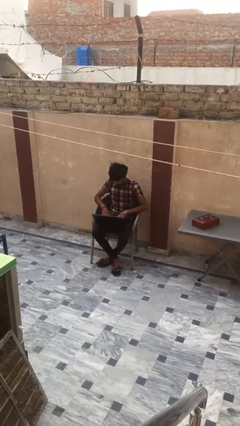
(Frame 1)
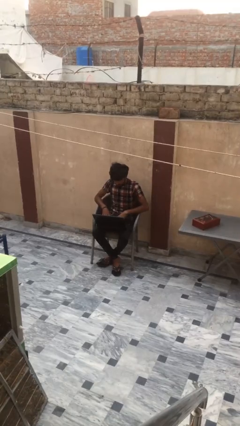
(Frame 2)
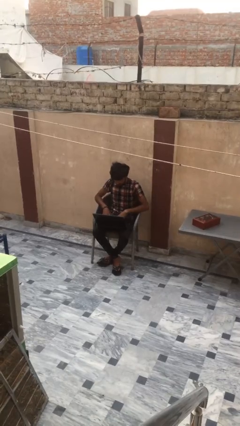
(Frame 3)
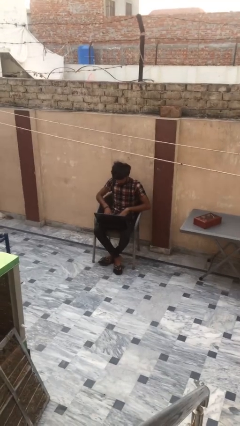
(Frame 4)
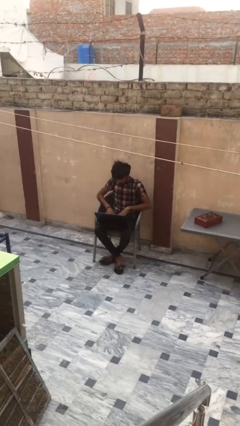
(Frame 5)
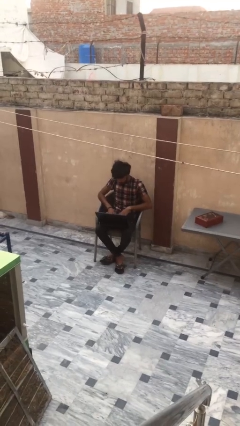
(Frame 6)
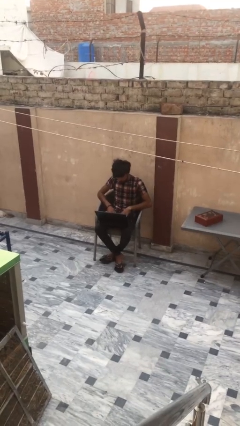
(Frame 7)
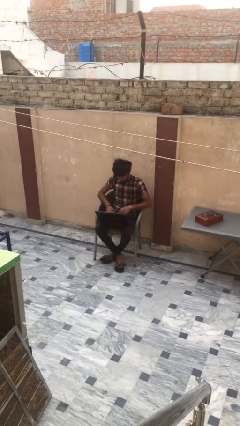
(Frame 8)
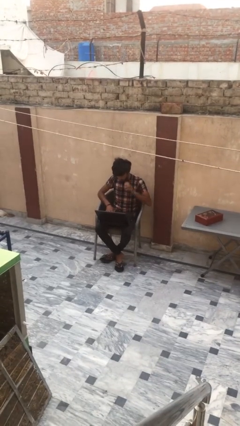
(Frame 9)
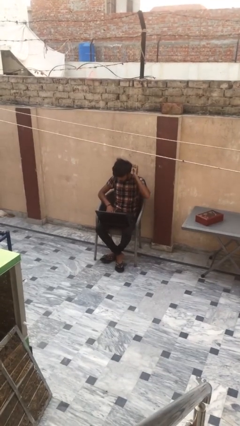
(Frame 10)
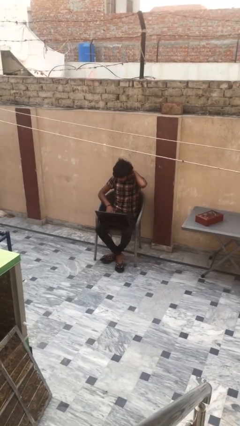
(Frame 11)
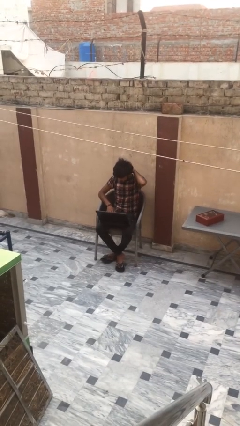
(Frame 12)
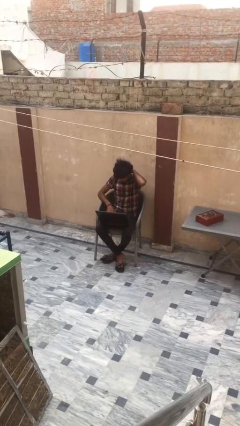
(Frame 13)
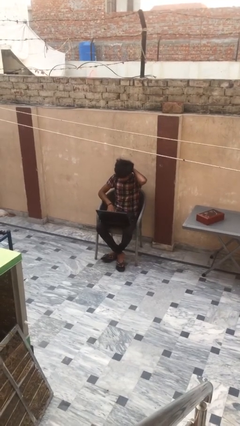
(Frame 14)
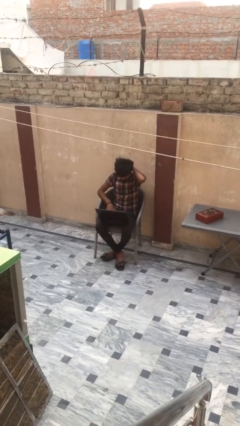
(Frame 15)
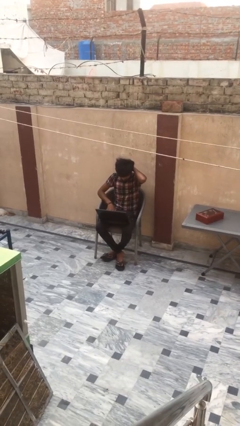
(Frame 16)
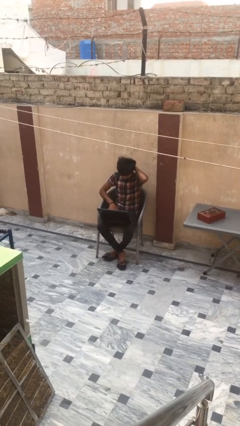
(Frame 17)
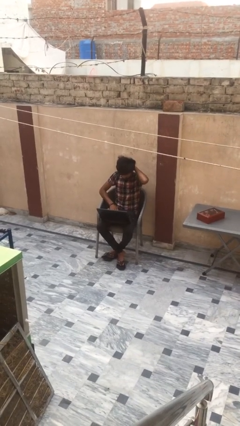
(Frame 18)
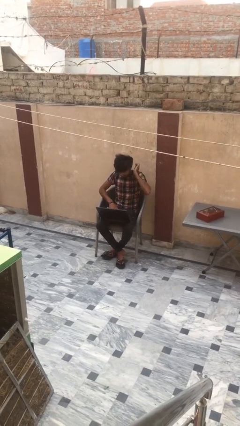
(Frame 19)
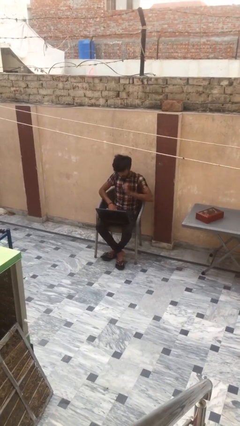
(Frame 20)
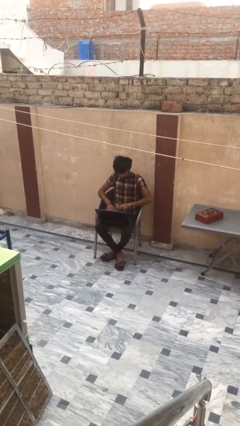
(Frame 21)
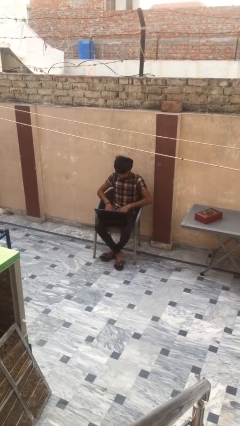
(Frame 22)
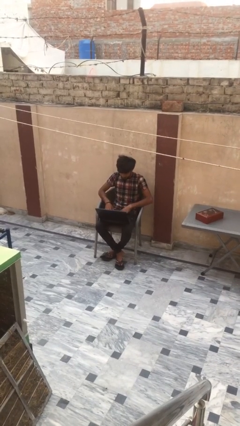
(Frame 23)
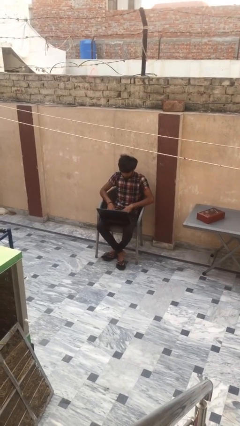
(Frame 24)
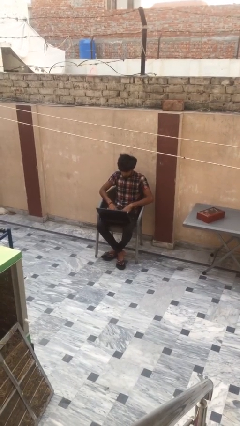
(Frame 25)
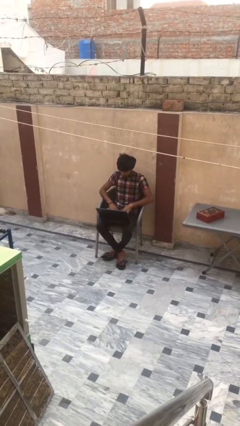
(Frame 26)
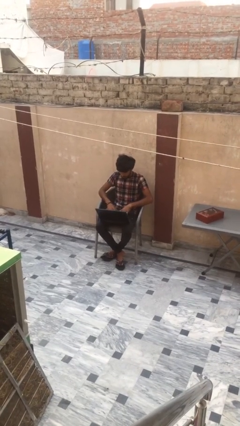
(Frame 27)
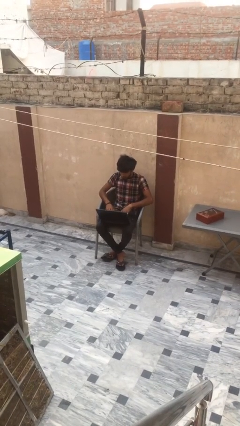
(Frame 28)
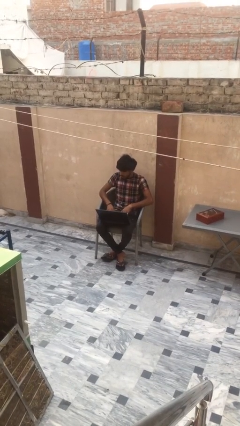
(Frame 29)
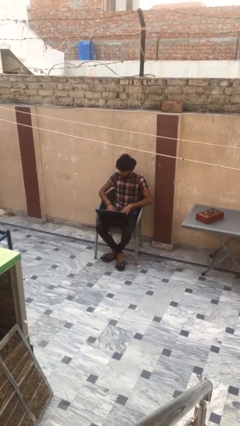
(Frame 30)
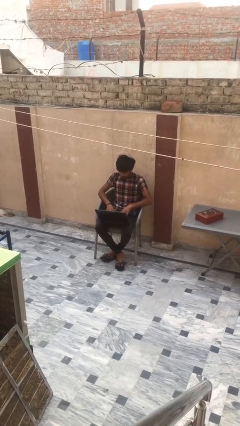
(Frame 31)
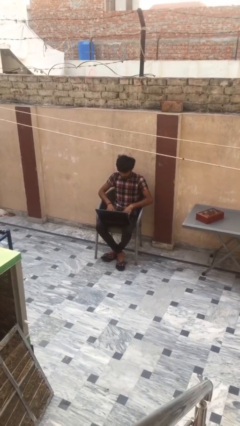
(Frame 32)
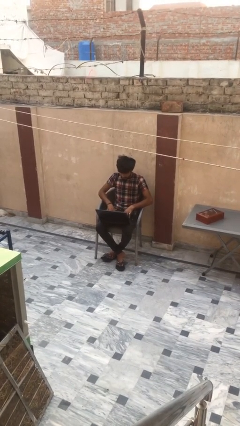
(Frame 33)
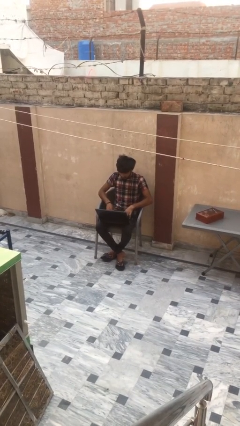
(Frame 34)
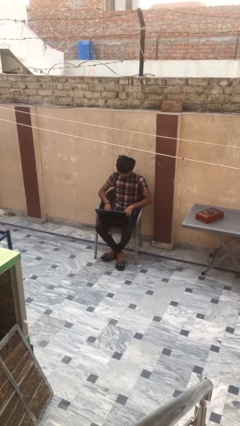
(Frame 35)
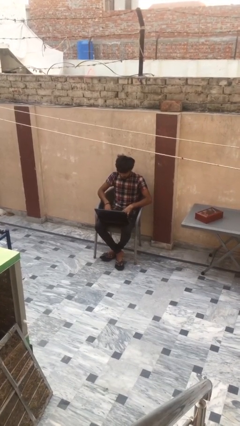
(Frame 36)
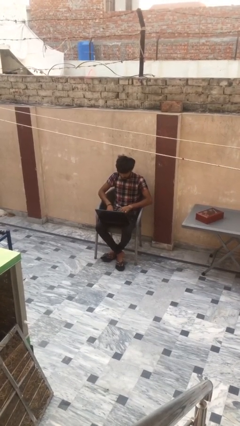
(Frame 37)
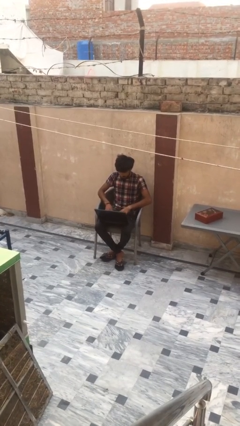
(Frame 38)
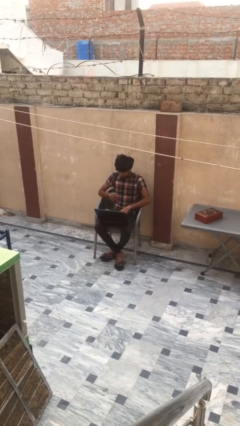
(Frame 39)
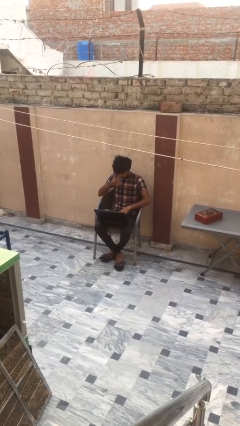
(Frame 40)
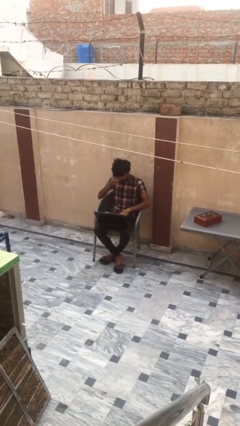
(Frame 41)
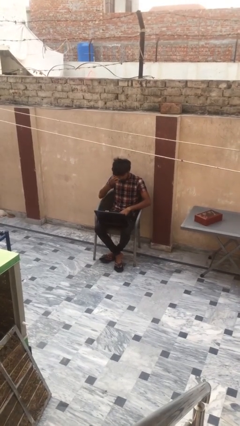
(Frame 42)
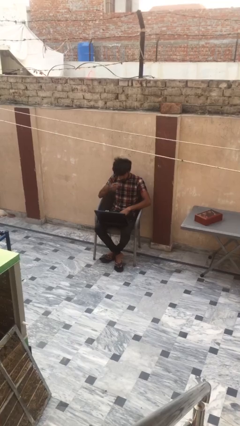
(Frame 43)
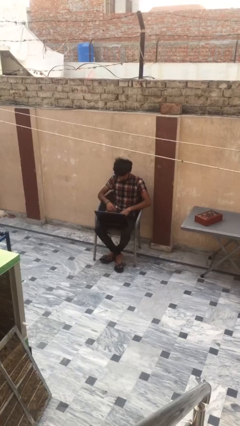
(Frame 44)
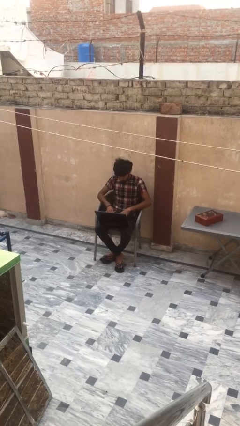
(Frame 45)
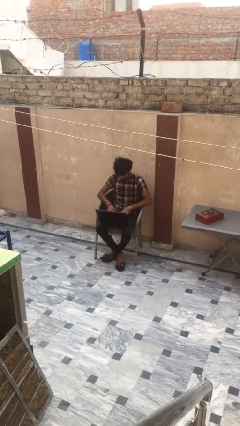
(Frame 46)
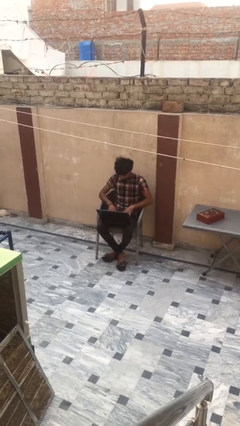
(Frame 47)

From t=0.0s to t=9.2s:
person interacts with laptop

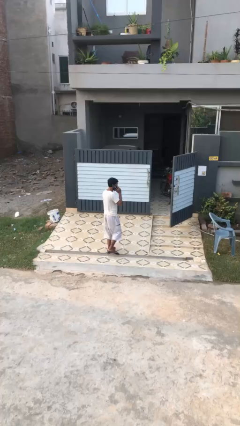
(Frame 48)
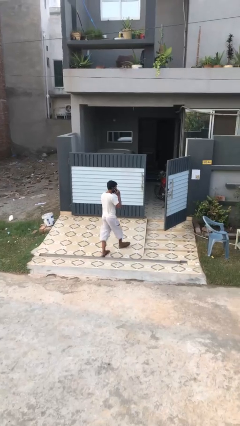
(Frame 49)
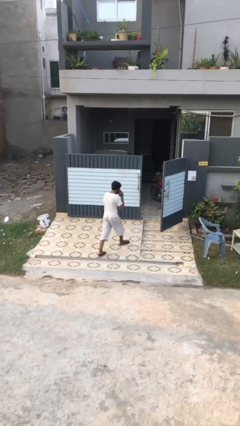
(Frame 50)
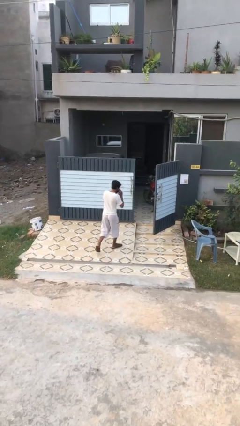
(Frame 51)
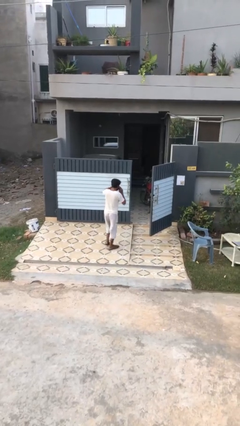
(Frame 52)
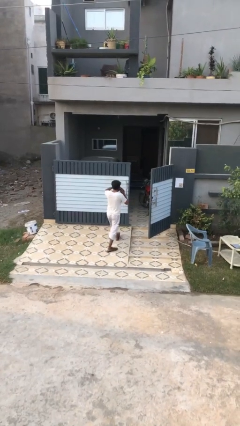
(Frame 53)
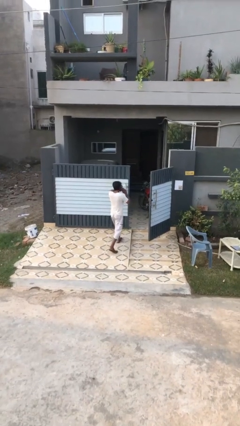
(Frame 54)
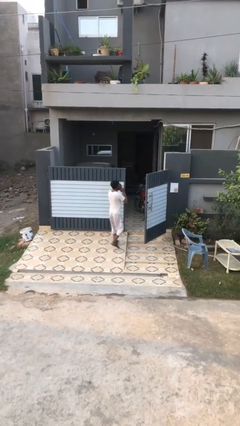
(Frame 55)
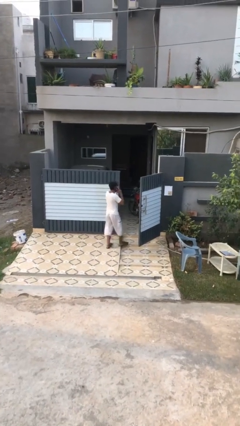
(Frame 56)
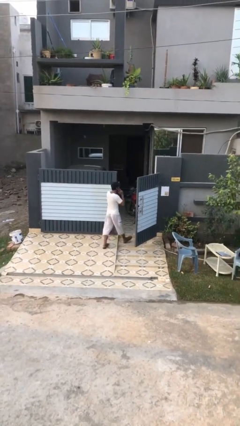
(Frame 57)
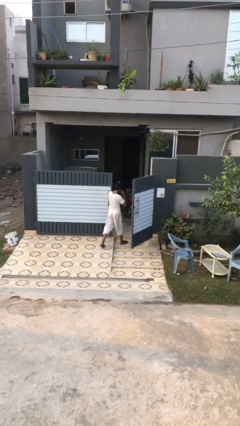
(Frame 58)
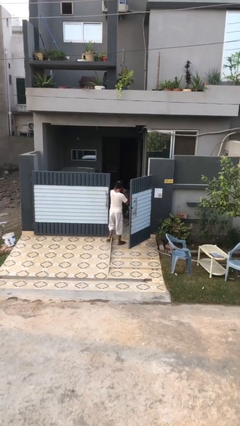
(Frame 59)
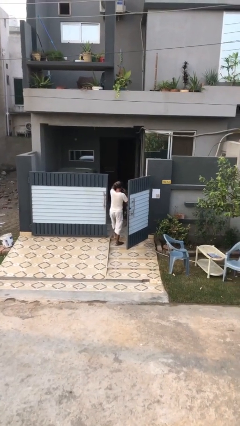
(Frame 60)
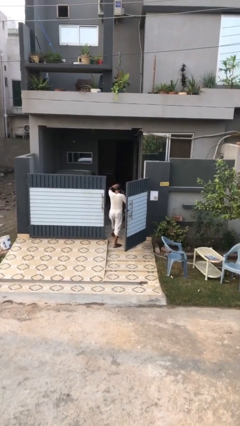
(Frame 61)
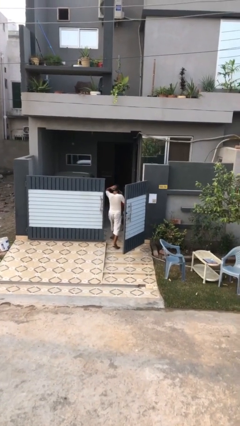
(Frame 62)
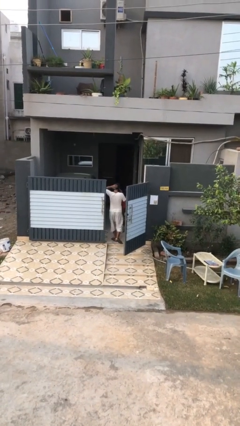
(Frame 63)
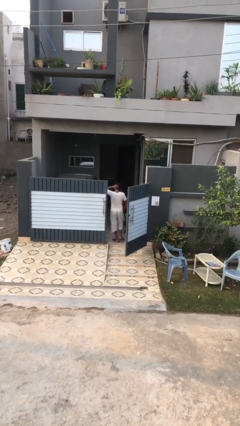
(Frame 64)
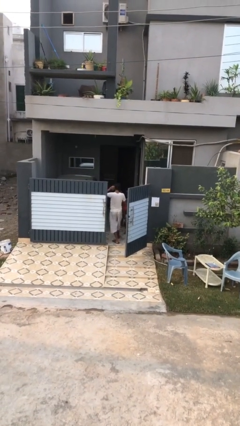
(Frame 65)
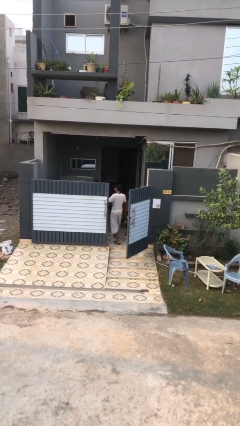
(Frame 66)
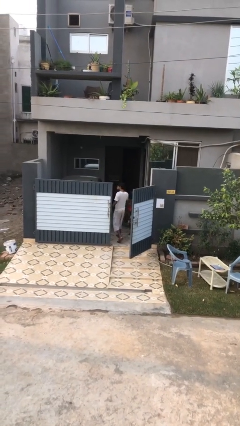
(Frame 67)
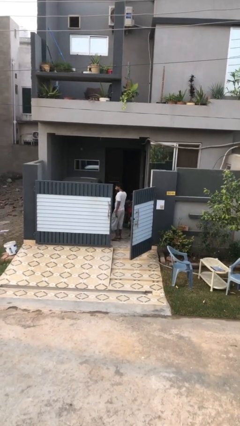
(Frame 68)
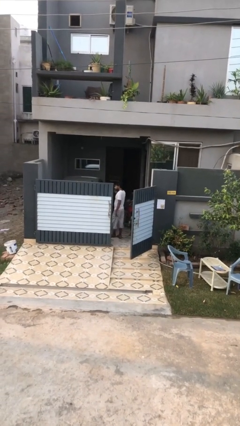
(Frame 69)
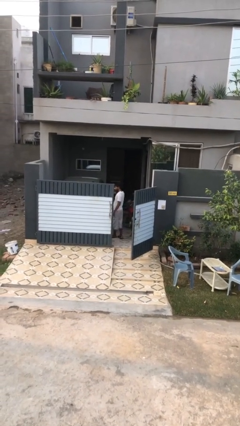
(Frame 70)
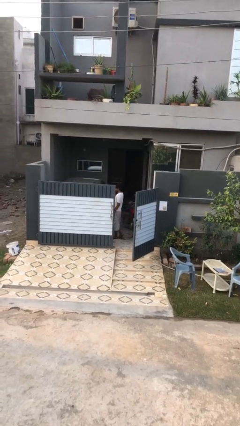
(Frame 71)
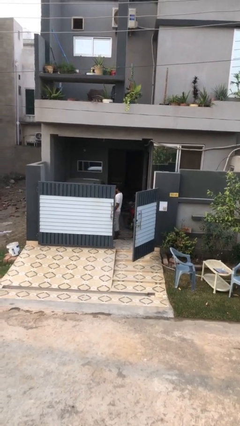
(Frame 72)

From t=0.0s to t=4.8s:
person exits scene through structure

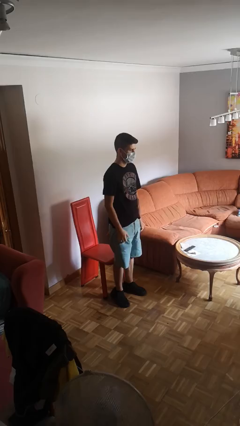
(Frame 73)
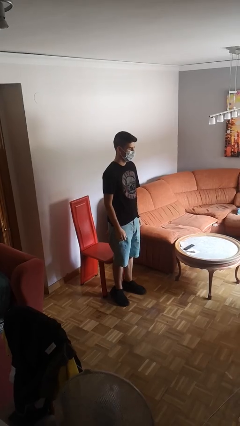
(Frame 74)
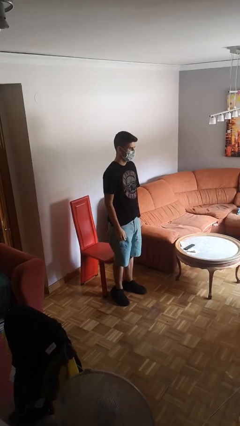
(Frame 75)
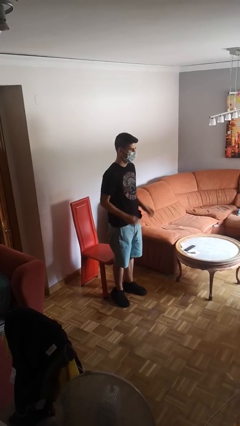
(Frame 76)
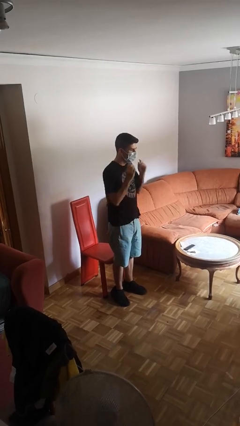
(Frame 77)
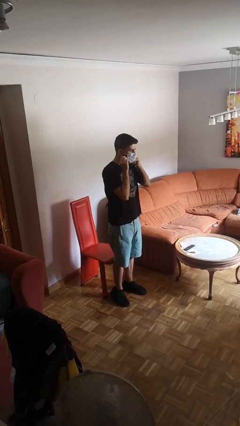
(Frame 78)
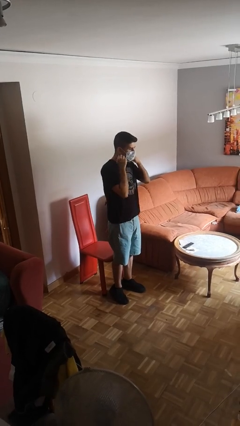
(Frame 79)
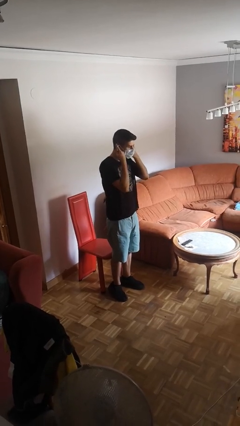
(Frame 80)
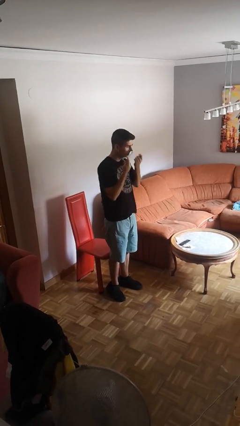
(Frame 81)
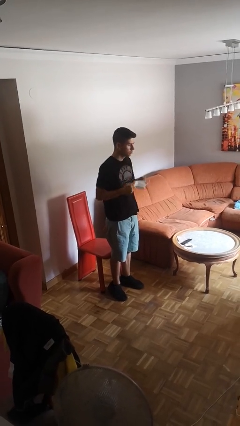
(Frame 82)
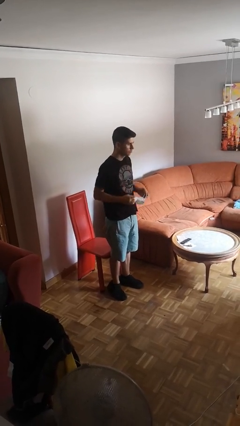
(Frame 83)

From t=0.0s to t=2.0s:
person takes off facemask

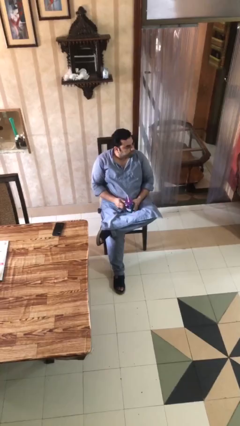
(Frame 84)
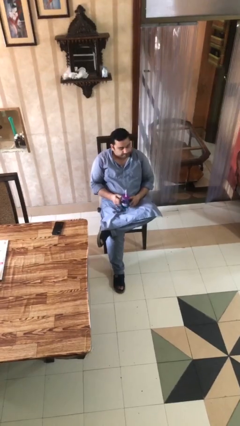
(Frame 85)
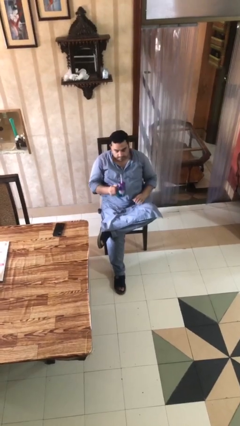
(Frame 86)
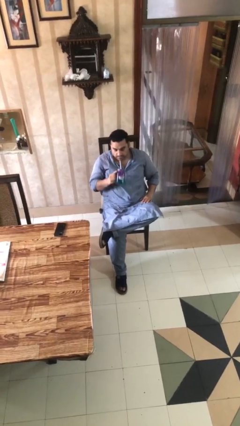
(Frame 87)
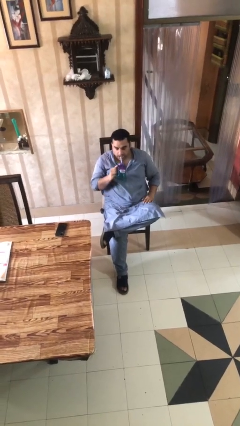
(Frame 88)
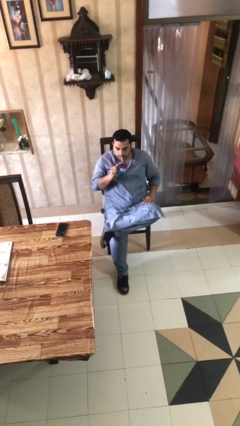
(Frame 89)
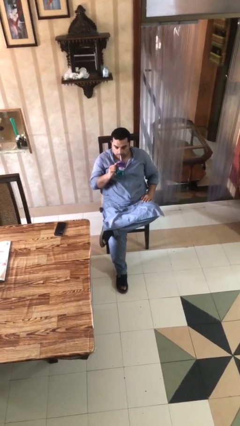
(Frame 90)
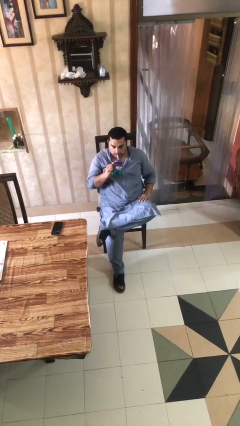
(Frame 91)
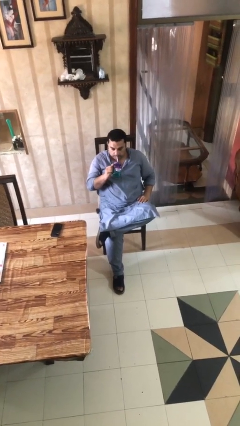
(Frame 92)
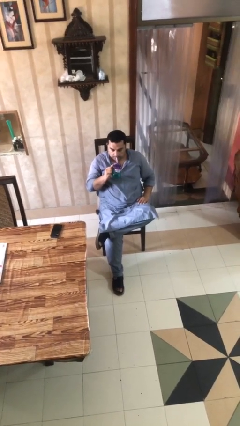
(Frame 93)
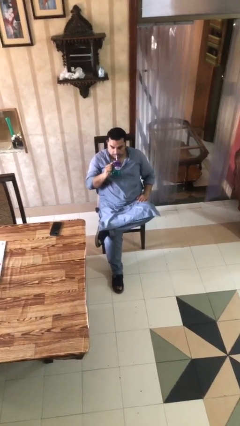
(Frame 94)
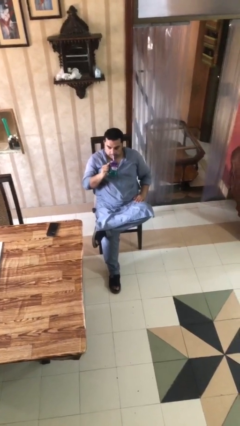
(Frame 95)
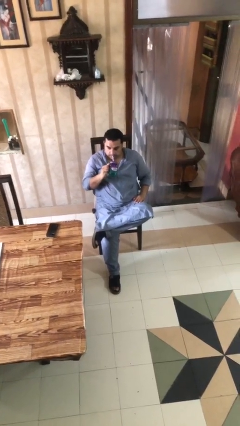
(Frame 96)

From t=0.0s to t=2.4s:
person drinks from straw
